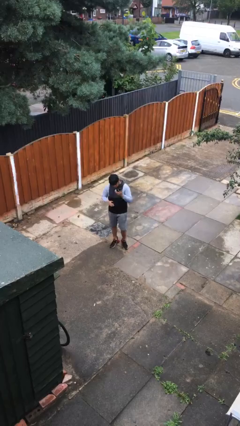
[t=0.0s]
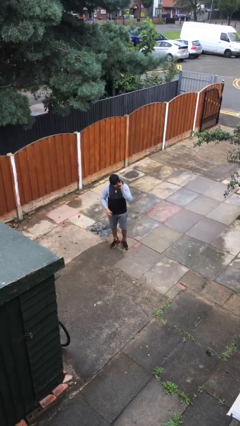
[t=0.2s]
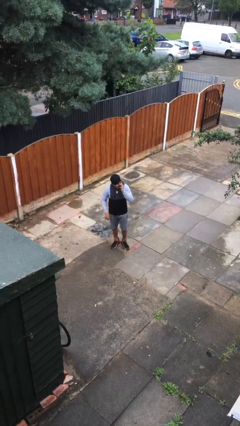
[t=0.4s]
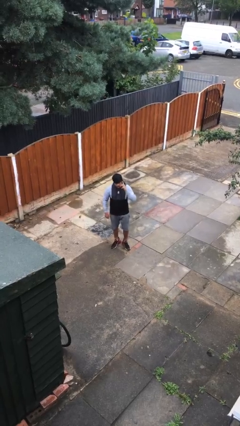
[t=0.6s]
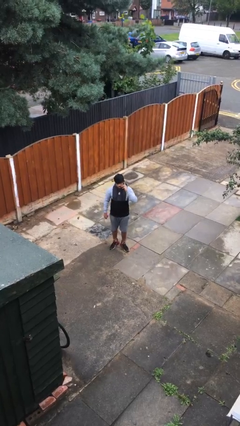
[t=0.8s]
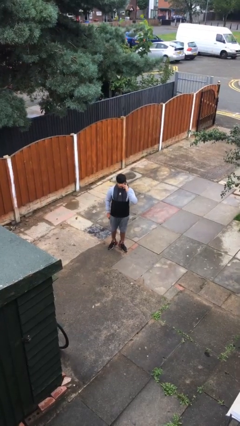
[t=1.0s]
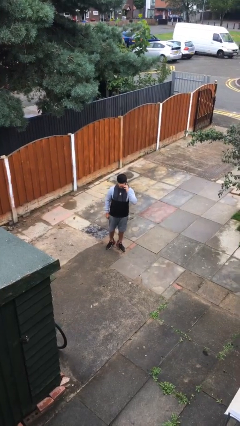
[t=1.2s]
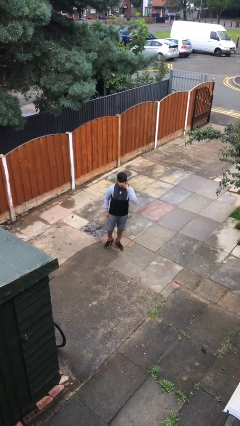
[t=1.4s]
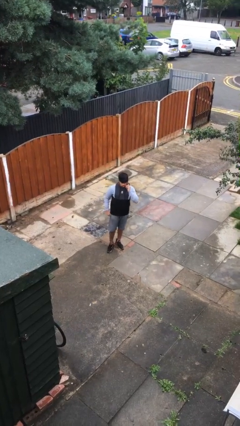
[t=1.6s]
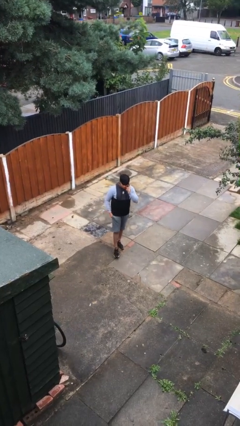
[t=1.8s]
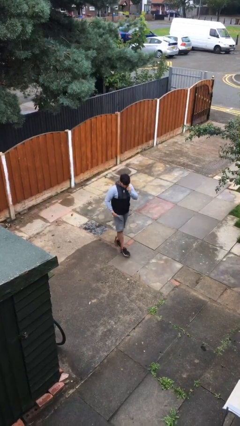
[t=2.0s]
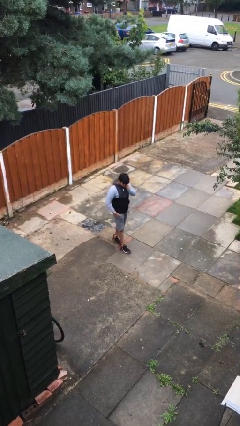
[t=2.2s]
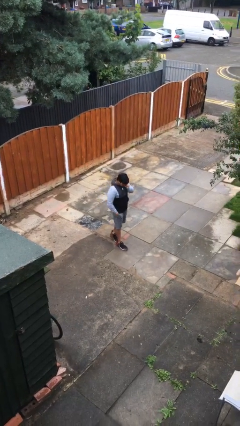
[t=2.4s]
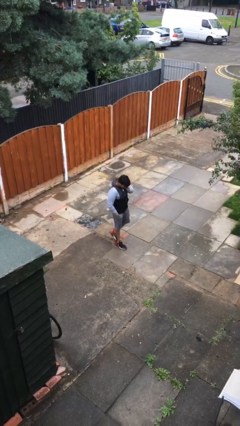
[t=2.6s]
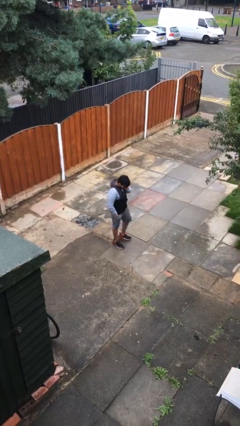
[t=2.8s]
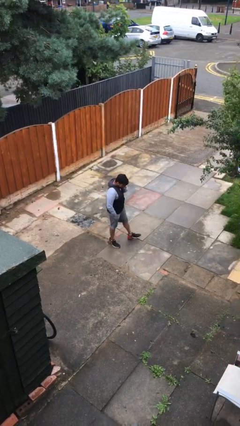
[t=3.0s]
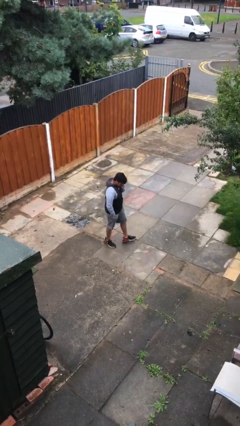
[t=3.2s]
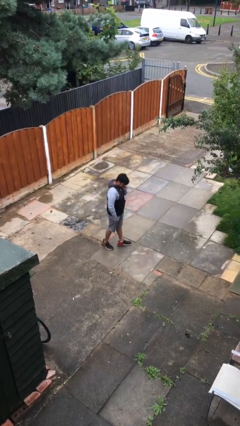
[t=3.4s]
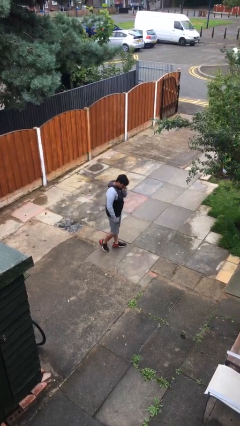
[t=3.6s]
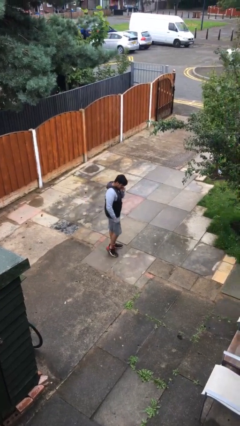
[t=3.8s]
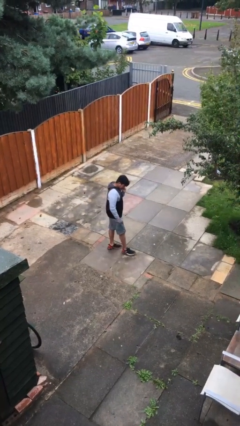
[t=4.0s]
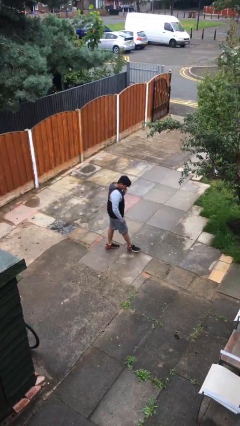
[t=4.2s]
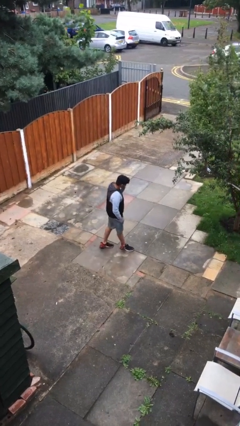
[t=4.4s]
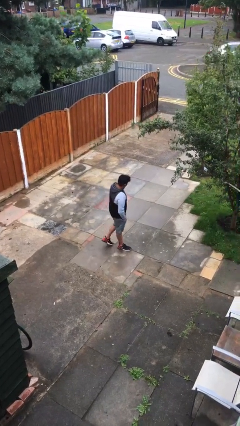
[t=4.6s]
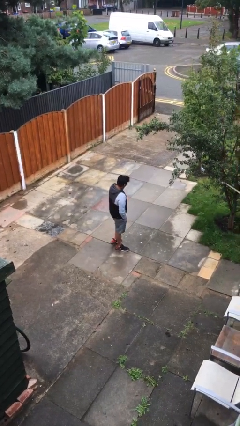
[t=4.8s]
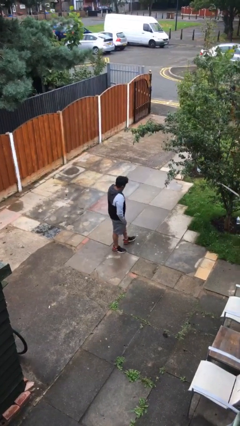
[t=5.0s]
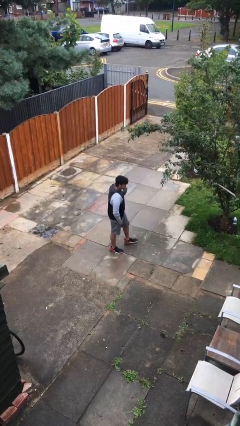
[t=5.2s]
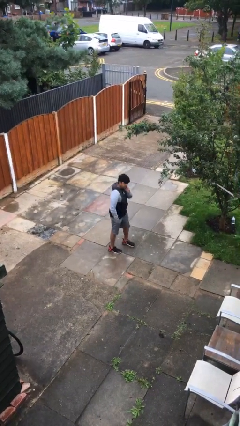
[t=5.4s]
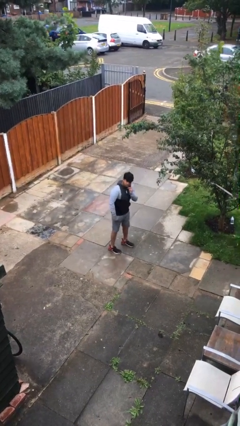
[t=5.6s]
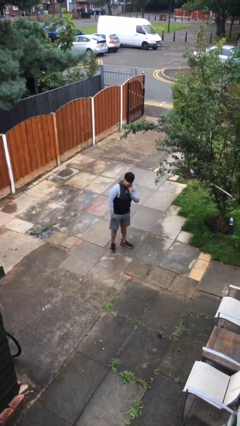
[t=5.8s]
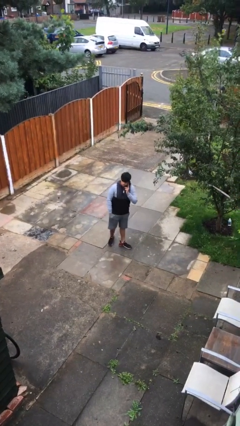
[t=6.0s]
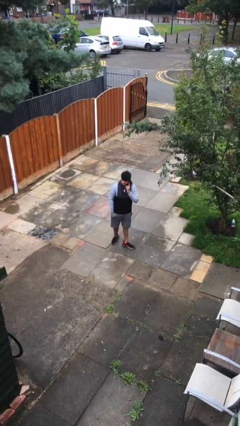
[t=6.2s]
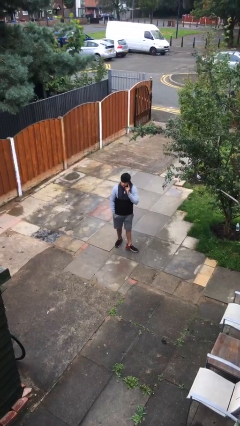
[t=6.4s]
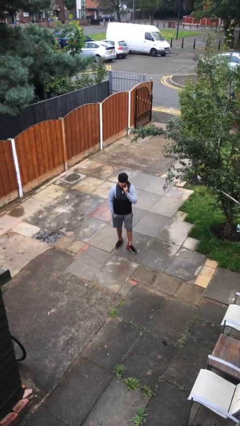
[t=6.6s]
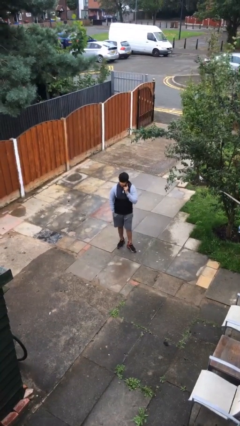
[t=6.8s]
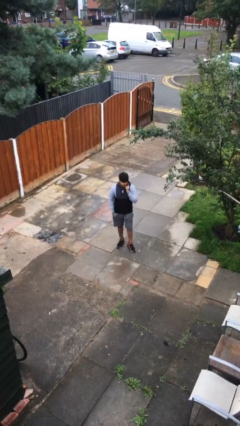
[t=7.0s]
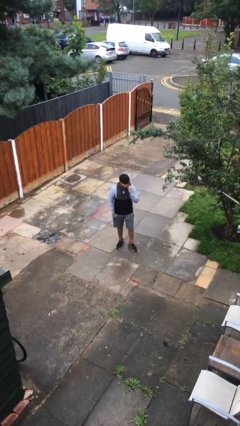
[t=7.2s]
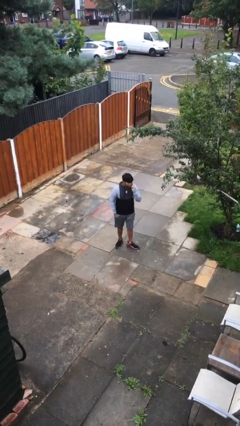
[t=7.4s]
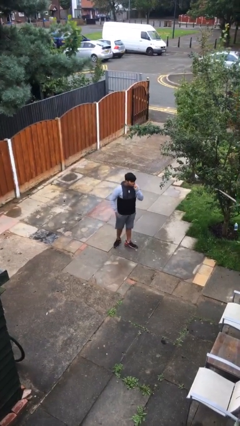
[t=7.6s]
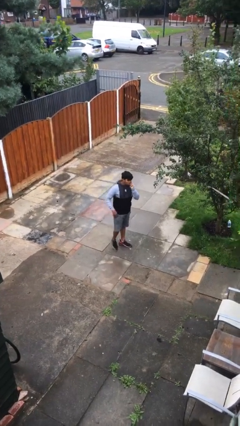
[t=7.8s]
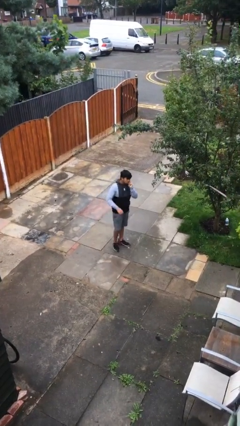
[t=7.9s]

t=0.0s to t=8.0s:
person talks on phone

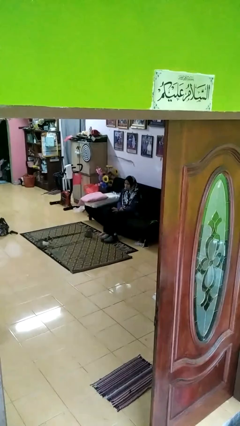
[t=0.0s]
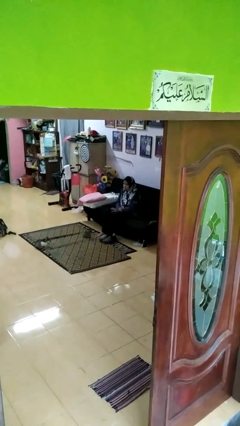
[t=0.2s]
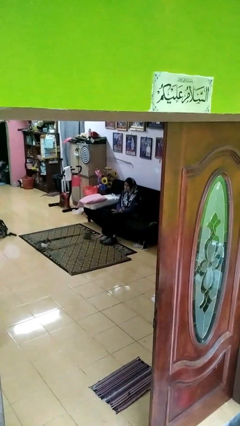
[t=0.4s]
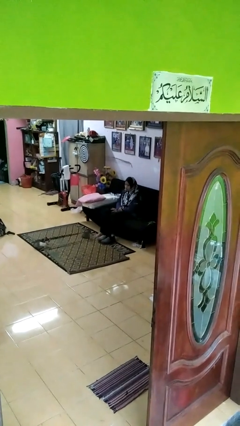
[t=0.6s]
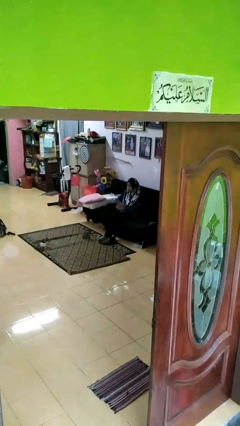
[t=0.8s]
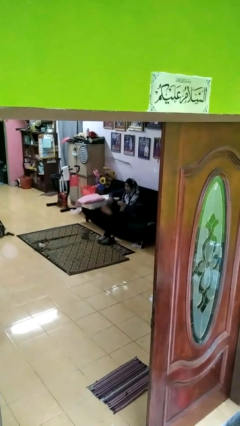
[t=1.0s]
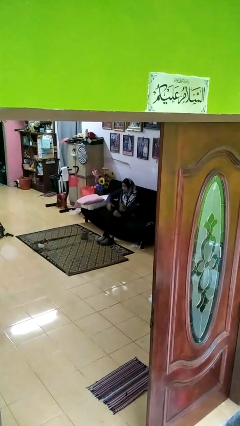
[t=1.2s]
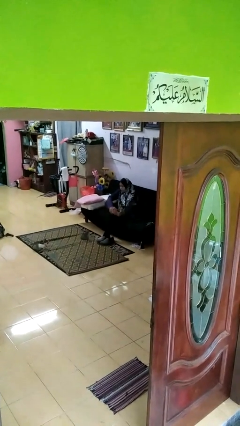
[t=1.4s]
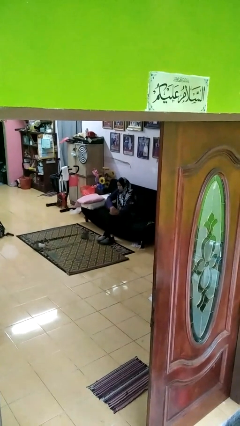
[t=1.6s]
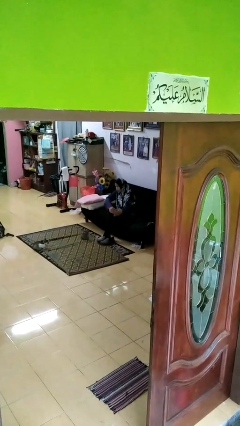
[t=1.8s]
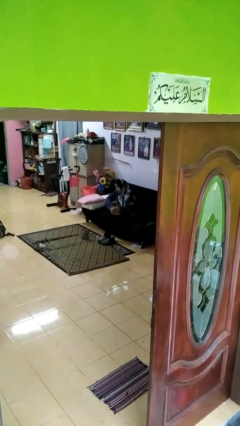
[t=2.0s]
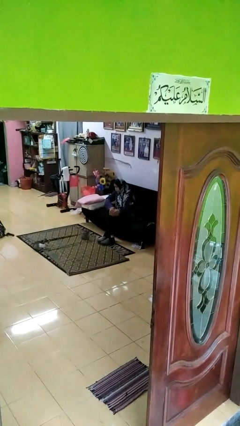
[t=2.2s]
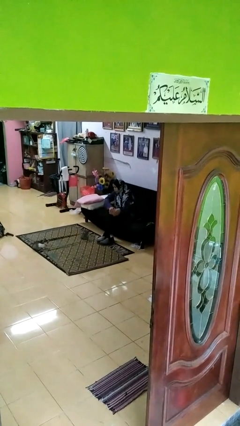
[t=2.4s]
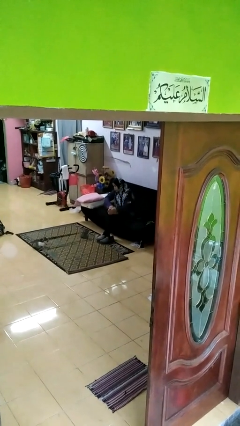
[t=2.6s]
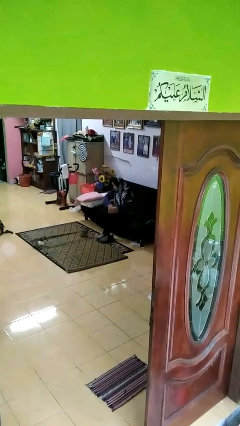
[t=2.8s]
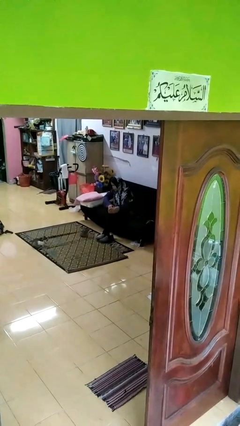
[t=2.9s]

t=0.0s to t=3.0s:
person rubs foot

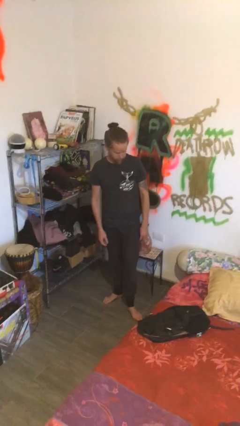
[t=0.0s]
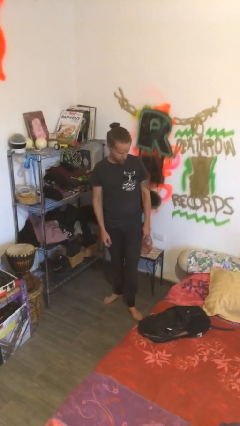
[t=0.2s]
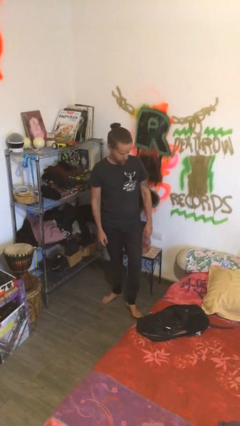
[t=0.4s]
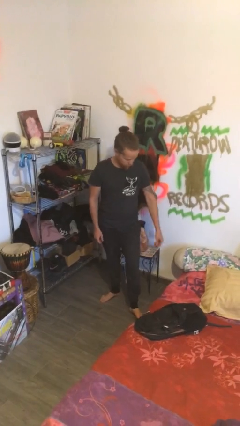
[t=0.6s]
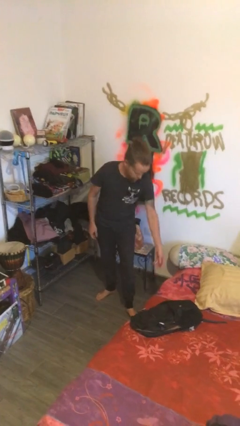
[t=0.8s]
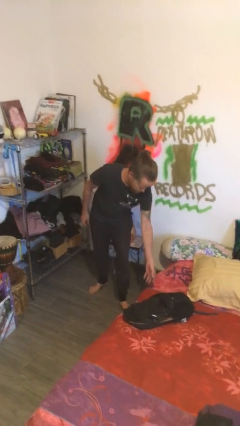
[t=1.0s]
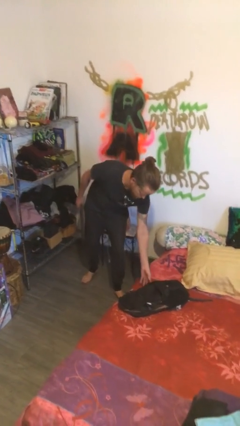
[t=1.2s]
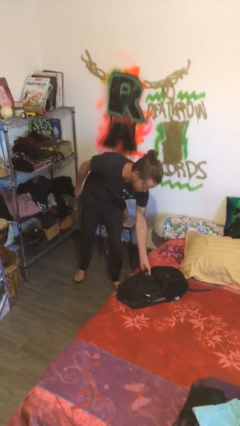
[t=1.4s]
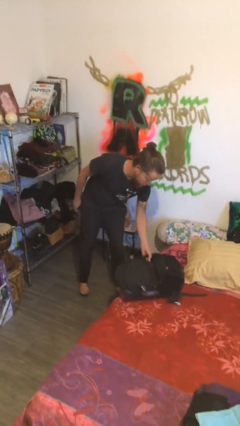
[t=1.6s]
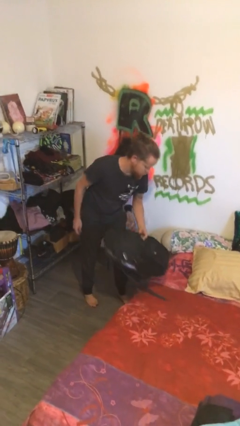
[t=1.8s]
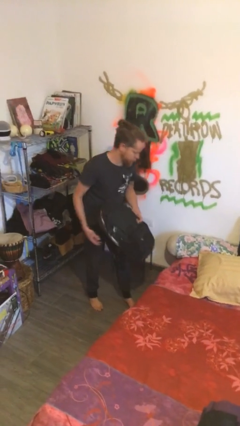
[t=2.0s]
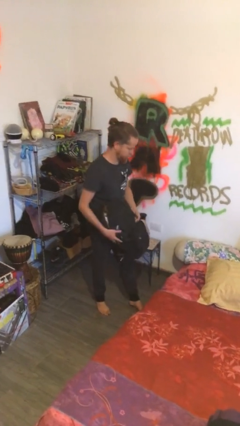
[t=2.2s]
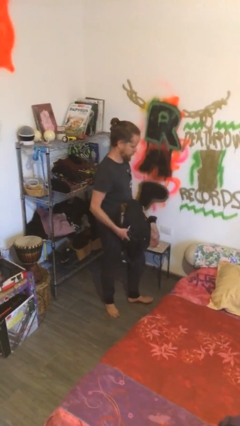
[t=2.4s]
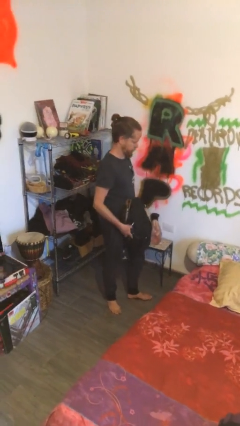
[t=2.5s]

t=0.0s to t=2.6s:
person picks up object from bed

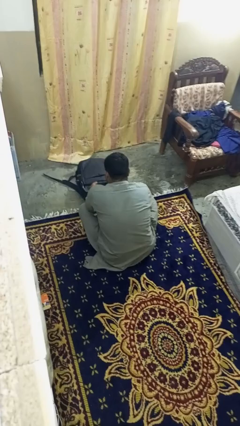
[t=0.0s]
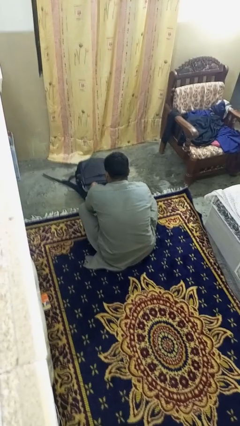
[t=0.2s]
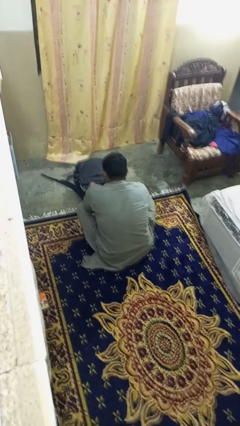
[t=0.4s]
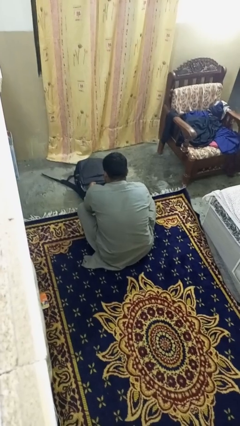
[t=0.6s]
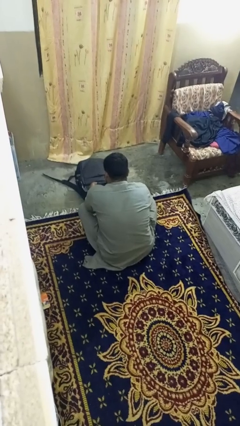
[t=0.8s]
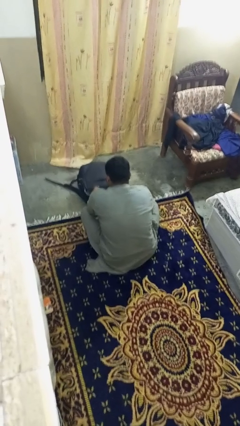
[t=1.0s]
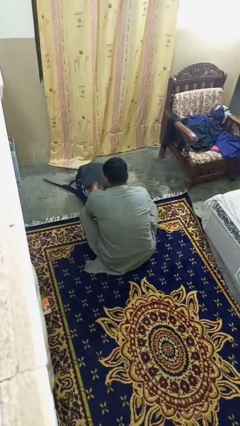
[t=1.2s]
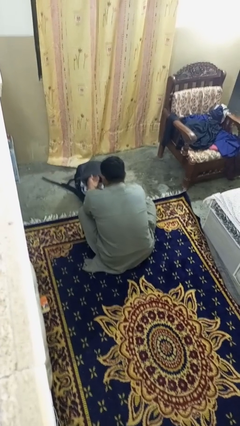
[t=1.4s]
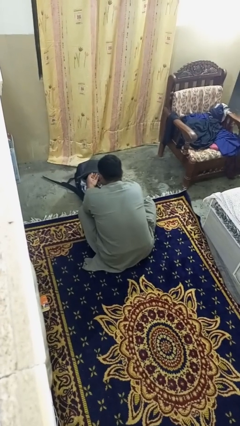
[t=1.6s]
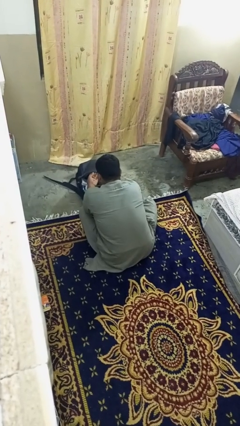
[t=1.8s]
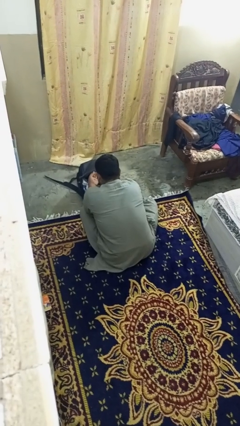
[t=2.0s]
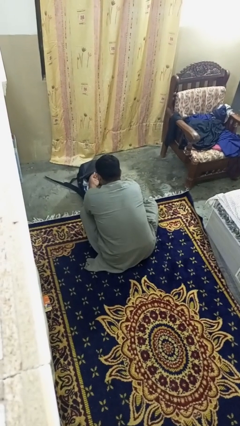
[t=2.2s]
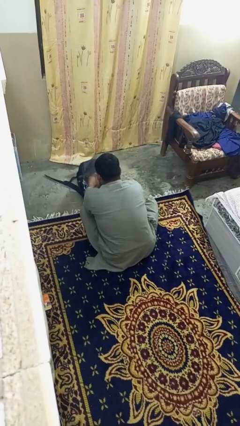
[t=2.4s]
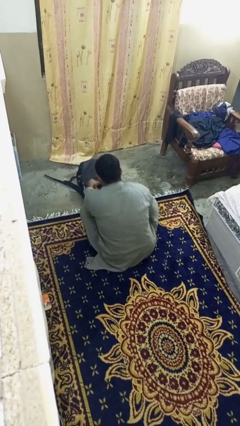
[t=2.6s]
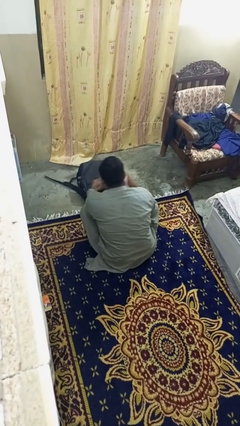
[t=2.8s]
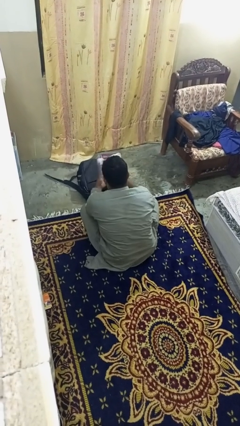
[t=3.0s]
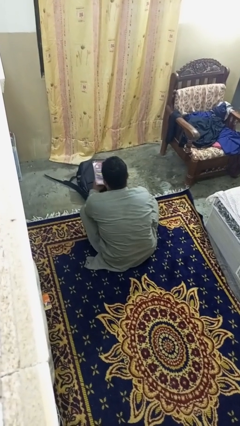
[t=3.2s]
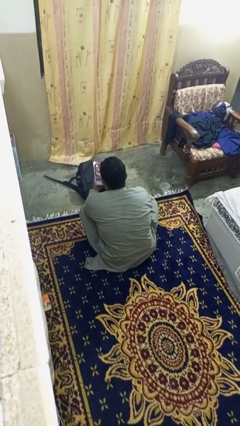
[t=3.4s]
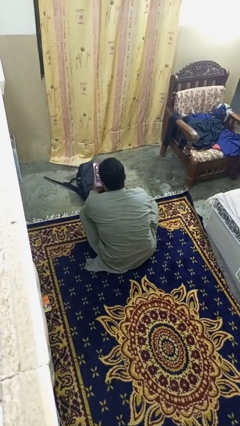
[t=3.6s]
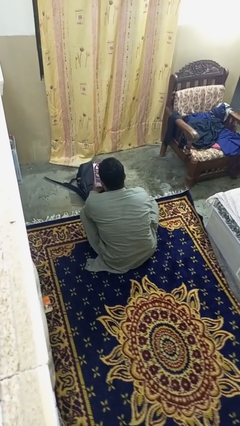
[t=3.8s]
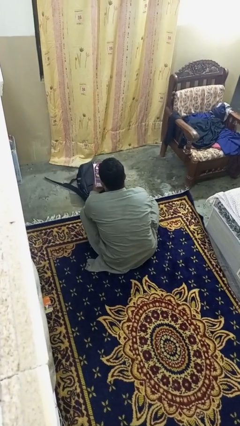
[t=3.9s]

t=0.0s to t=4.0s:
person takes object from bag
